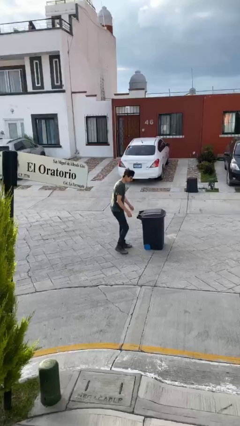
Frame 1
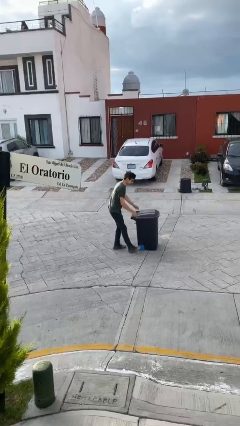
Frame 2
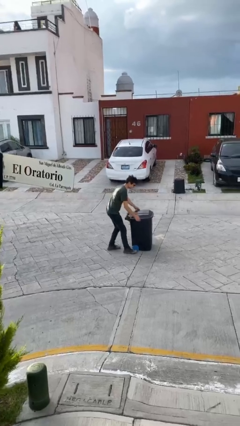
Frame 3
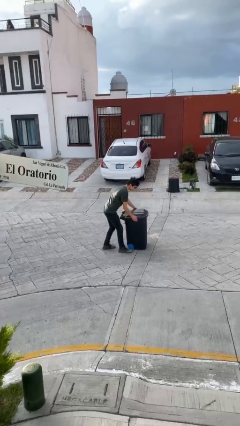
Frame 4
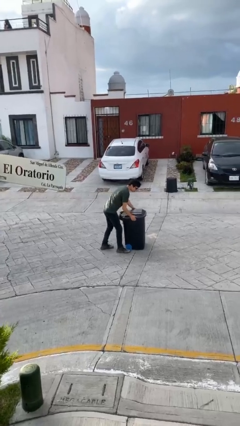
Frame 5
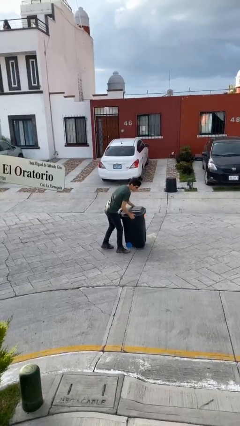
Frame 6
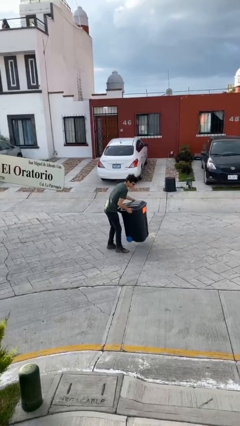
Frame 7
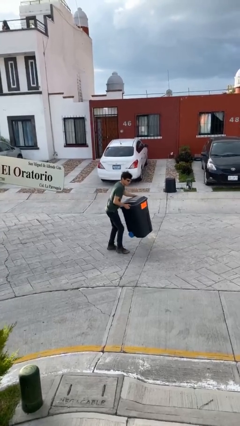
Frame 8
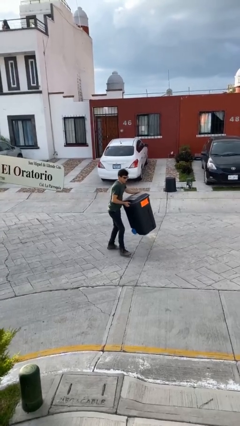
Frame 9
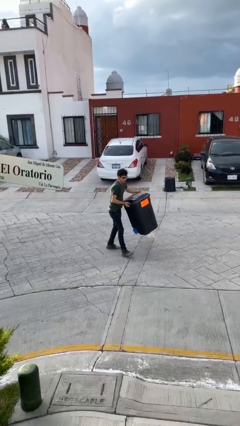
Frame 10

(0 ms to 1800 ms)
person picks up object from floor

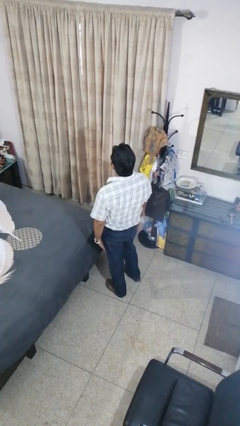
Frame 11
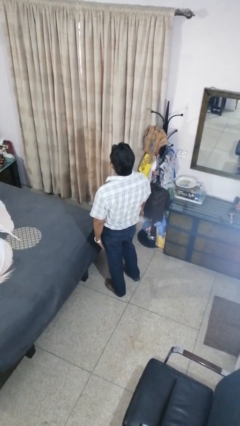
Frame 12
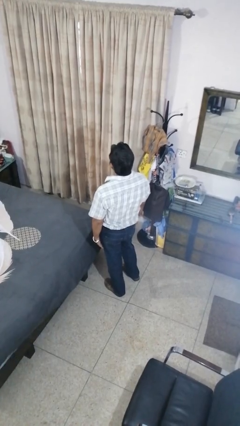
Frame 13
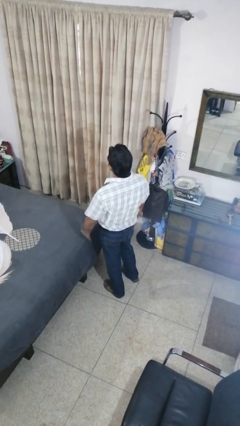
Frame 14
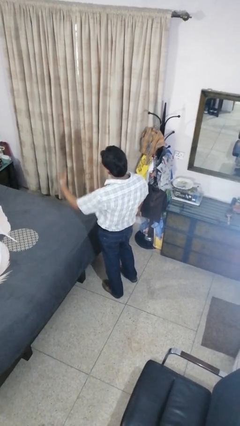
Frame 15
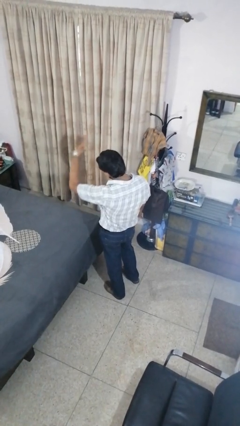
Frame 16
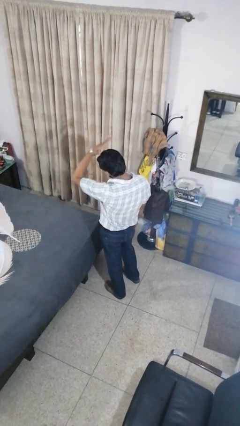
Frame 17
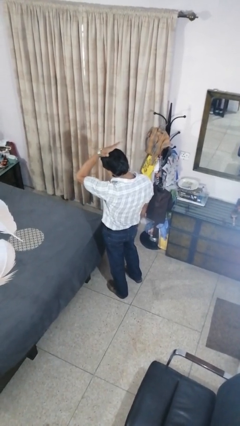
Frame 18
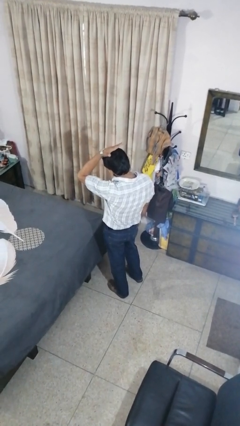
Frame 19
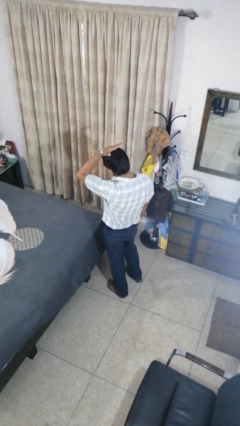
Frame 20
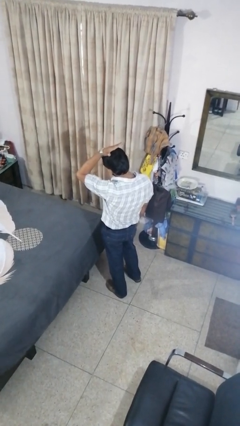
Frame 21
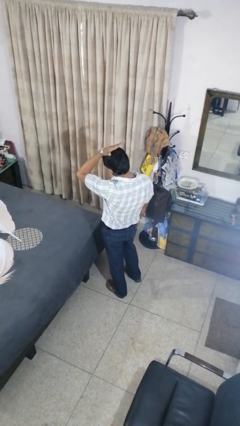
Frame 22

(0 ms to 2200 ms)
person pats head

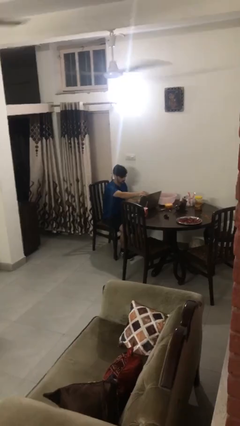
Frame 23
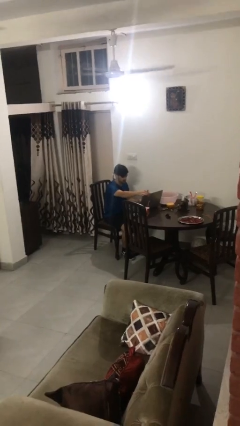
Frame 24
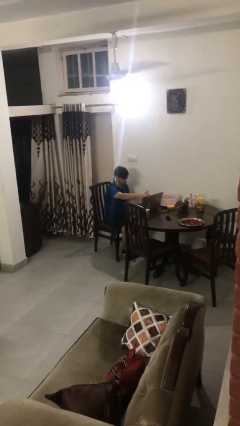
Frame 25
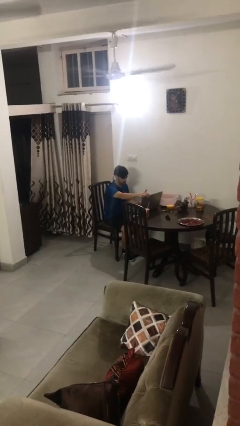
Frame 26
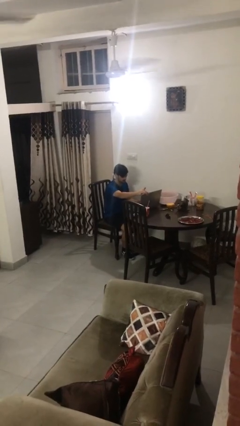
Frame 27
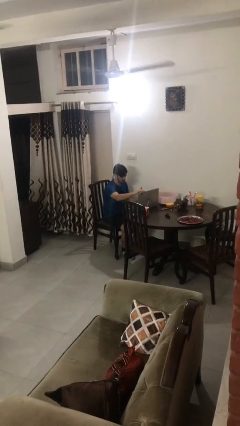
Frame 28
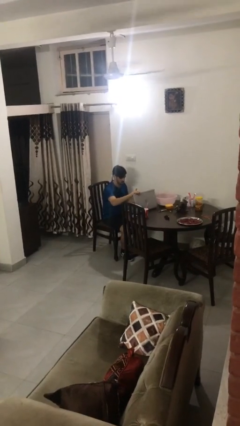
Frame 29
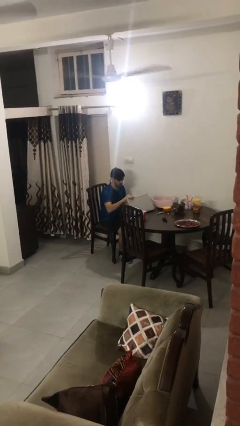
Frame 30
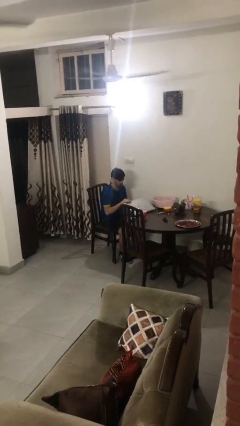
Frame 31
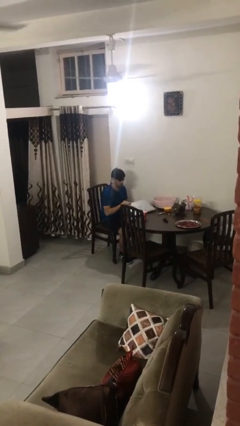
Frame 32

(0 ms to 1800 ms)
person closes laptop

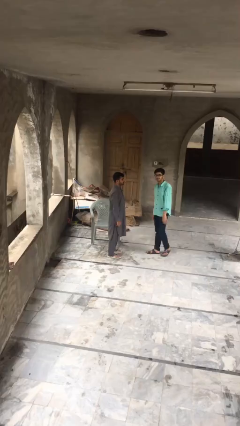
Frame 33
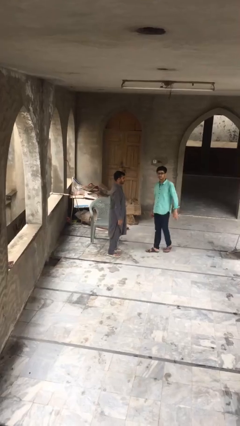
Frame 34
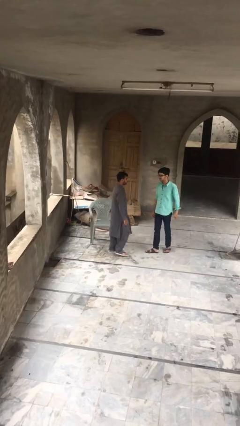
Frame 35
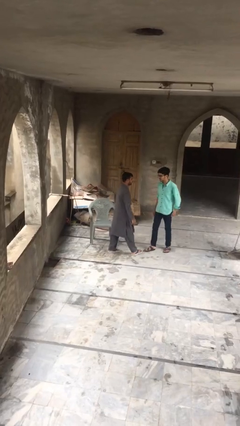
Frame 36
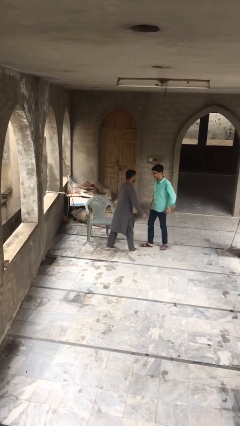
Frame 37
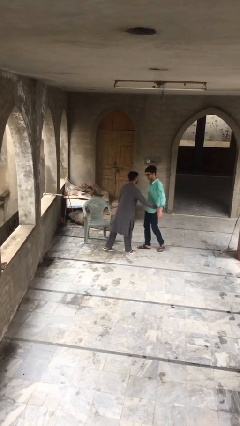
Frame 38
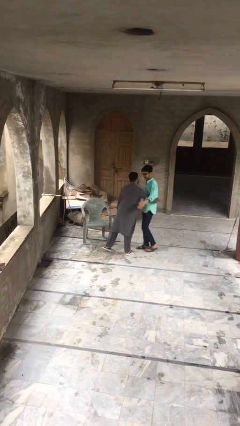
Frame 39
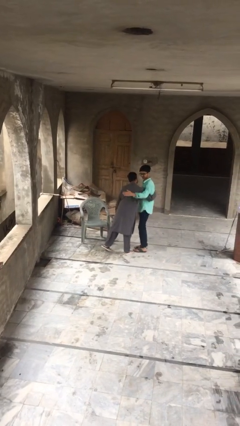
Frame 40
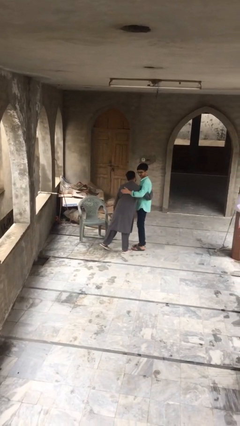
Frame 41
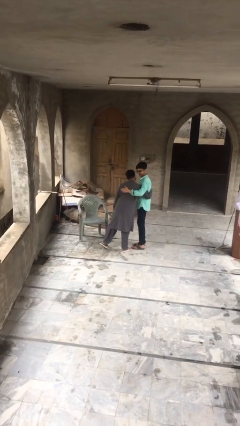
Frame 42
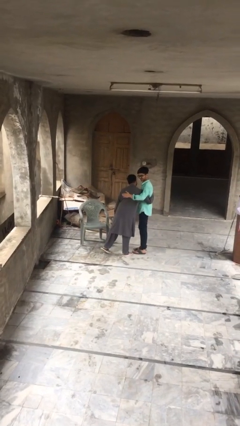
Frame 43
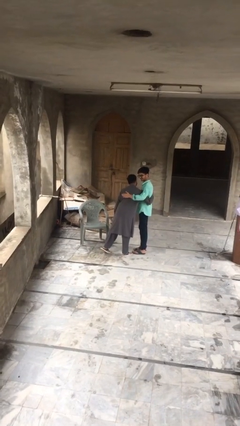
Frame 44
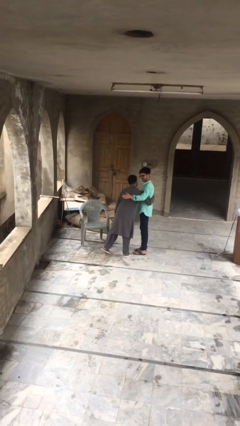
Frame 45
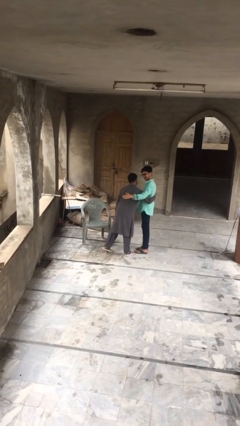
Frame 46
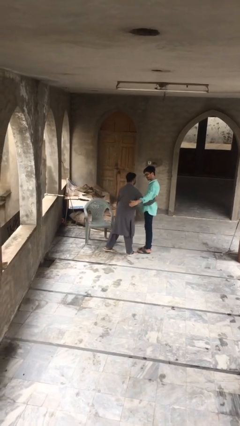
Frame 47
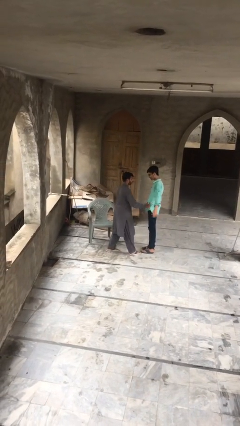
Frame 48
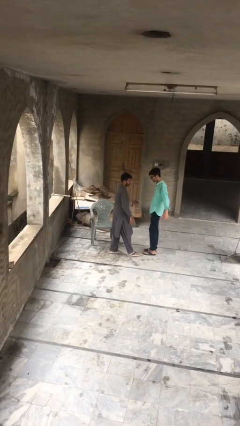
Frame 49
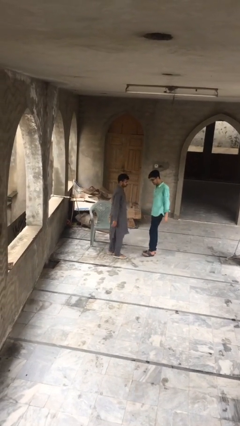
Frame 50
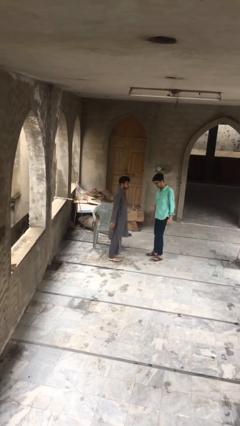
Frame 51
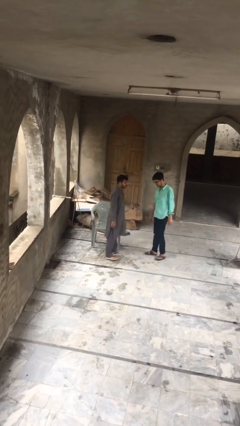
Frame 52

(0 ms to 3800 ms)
person embraces person

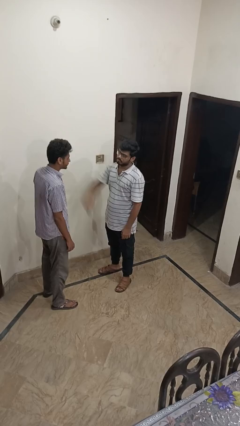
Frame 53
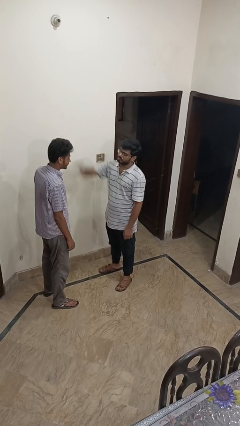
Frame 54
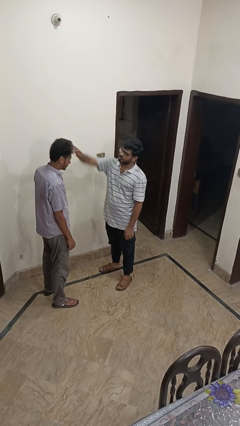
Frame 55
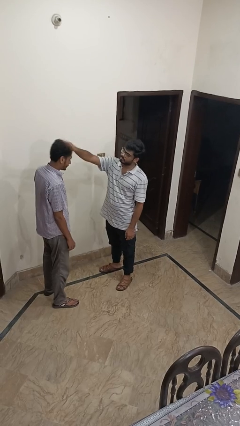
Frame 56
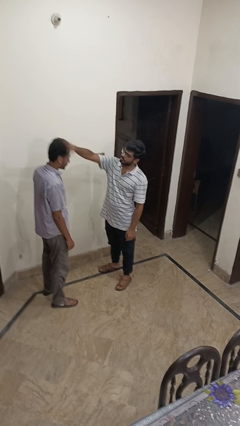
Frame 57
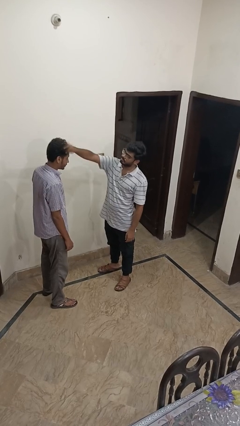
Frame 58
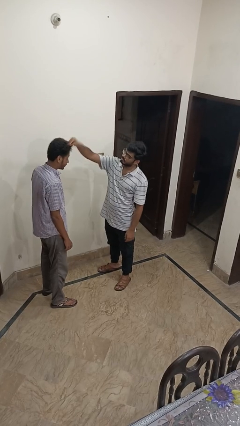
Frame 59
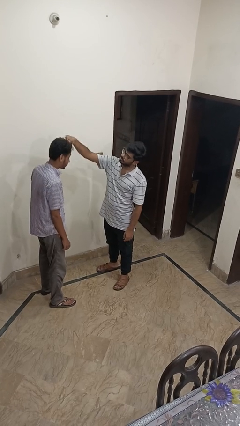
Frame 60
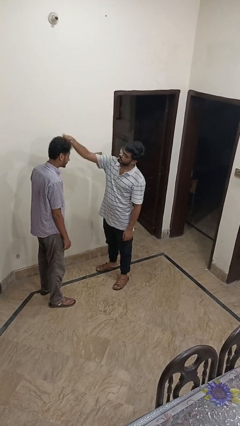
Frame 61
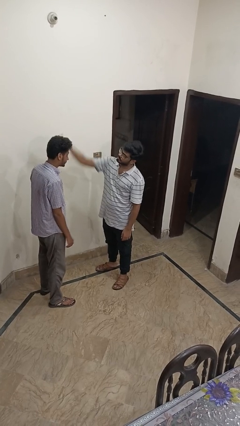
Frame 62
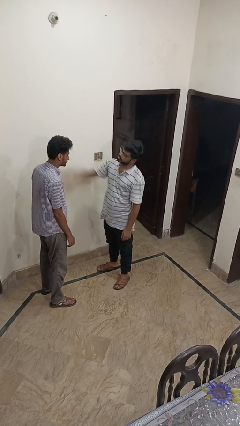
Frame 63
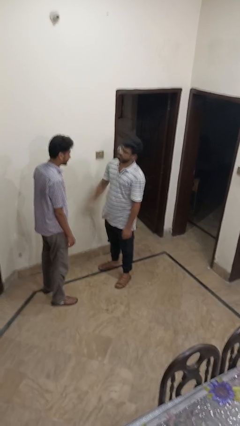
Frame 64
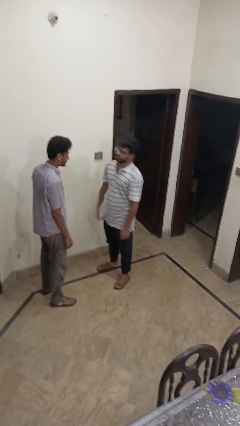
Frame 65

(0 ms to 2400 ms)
person grabs person by hair

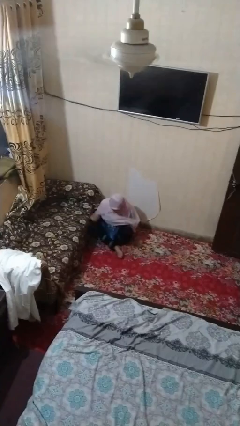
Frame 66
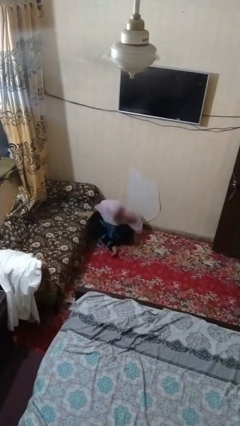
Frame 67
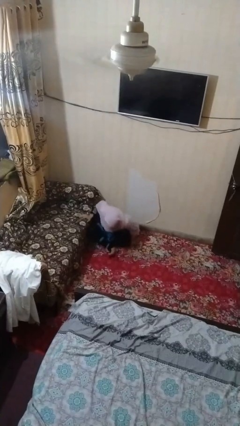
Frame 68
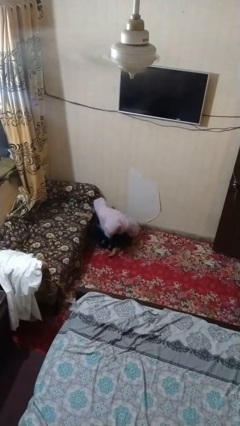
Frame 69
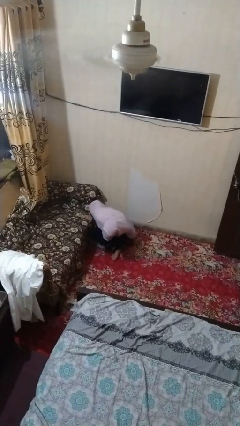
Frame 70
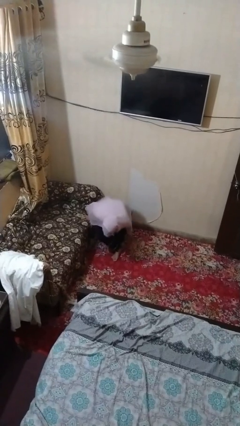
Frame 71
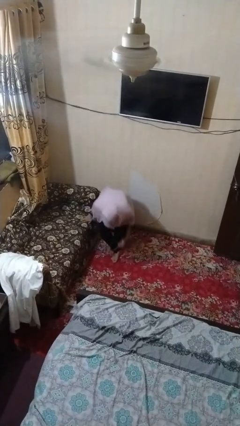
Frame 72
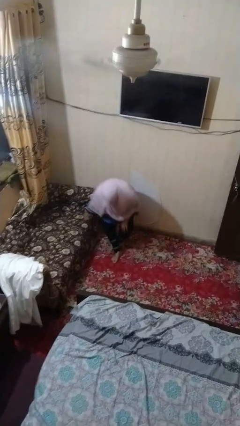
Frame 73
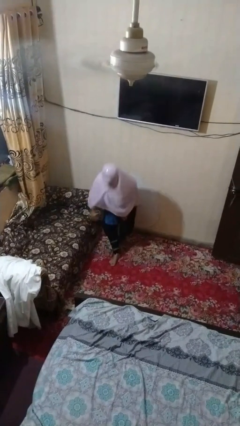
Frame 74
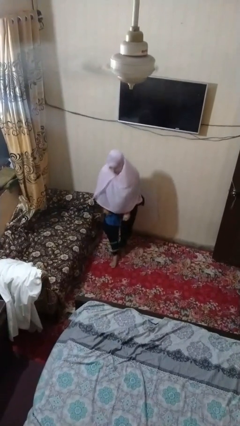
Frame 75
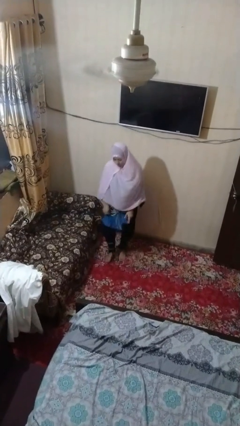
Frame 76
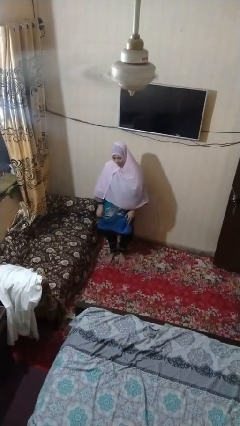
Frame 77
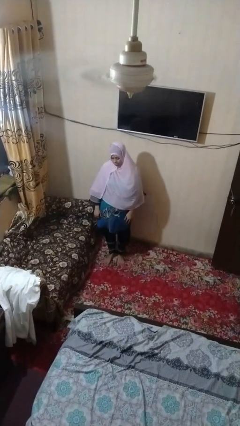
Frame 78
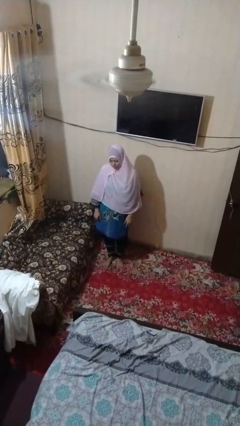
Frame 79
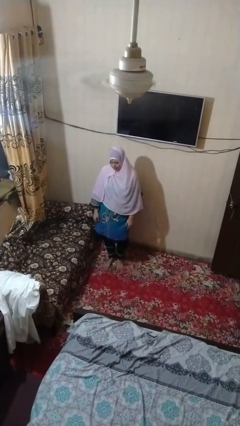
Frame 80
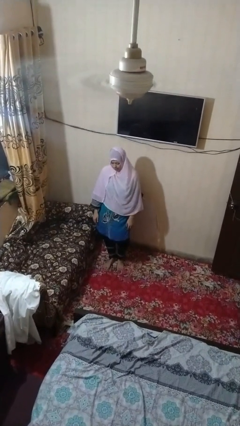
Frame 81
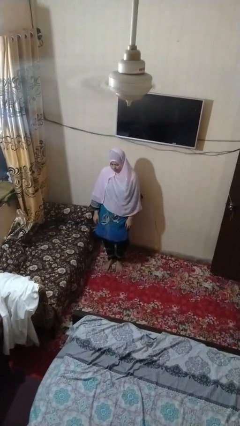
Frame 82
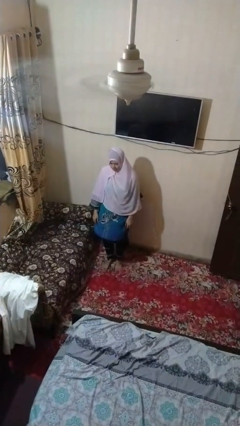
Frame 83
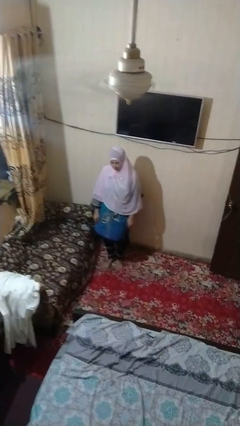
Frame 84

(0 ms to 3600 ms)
person stands up from floor

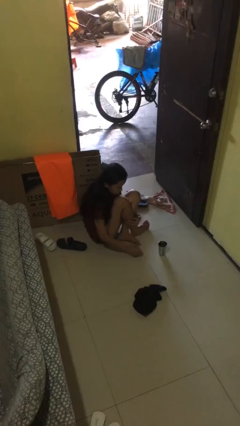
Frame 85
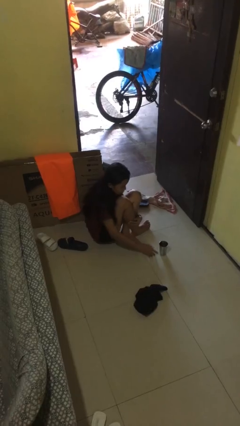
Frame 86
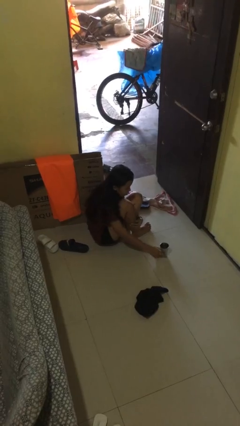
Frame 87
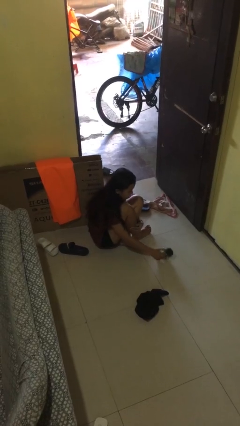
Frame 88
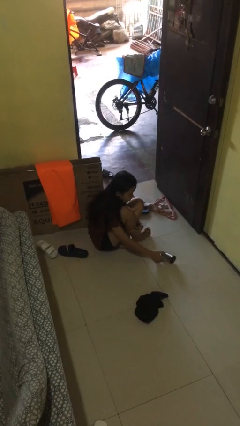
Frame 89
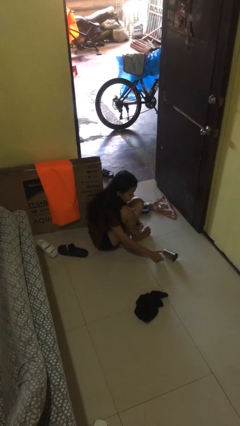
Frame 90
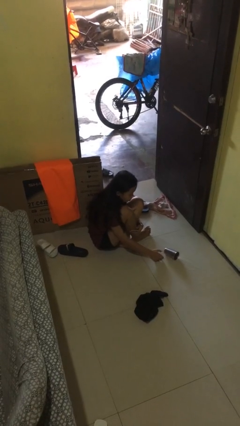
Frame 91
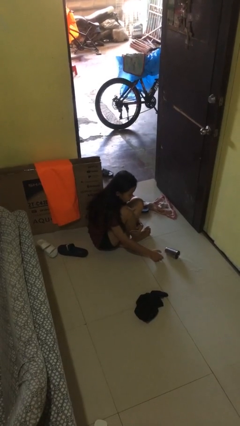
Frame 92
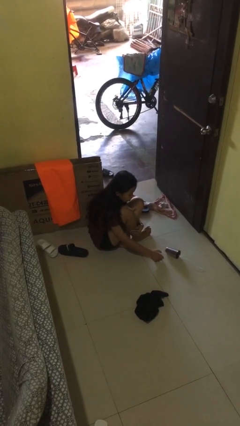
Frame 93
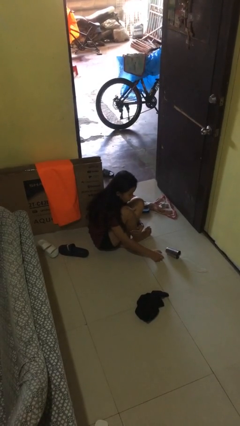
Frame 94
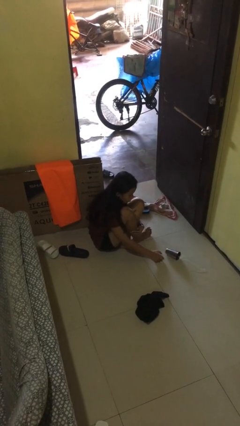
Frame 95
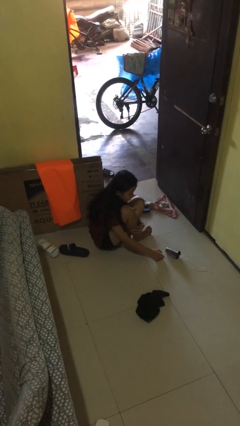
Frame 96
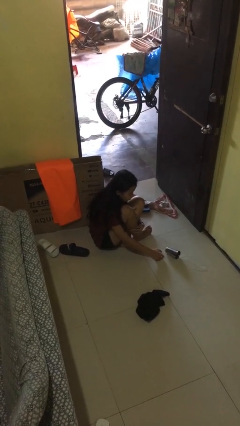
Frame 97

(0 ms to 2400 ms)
person spills on floor
